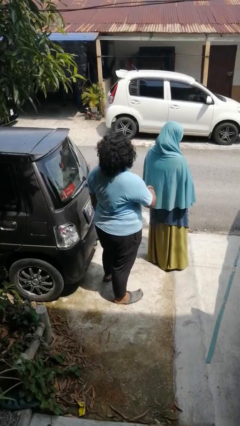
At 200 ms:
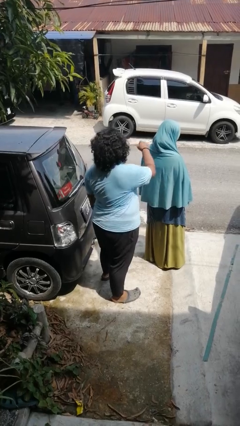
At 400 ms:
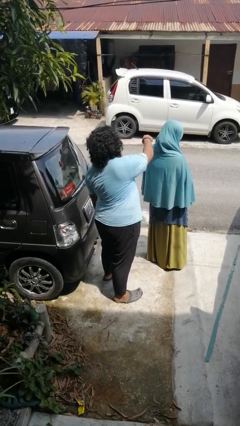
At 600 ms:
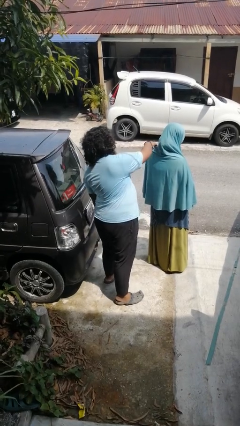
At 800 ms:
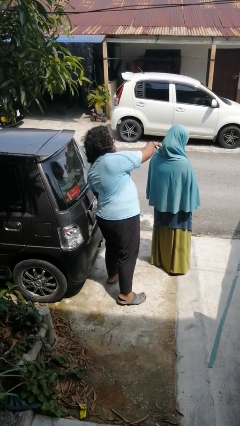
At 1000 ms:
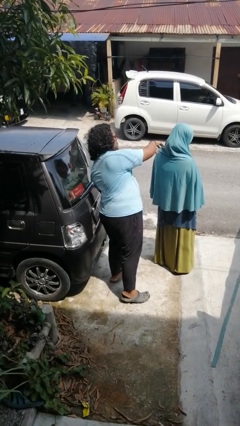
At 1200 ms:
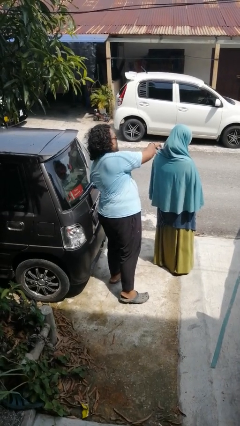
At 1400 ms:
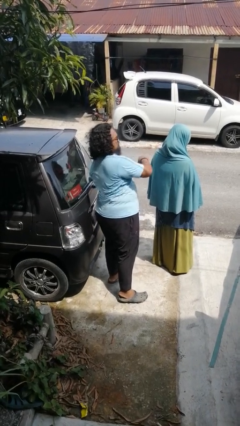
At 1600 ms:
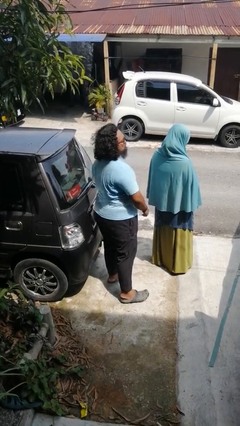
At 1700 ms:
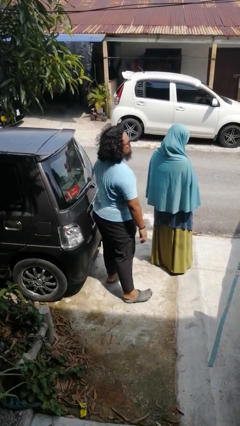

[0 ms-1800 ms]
person touches back of person

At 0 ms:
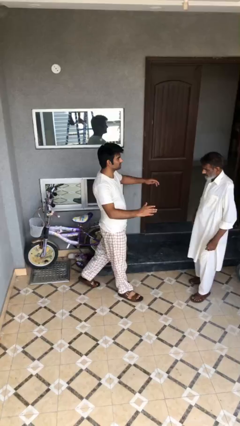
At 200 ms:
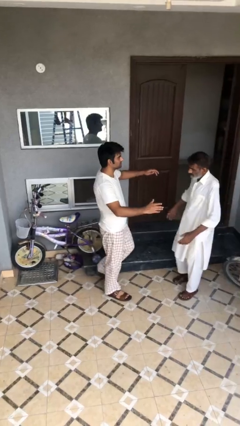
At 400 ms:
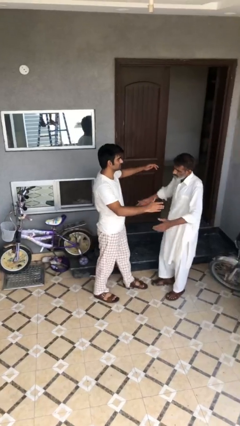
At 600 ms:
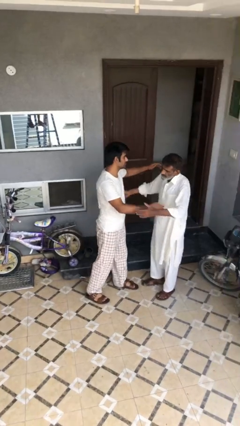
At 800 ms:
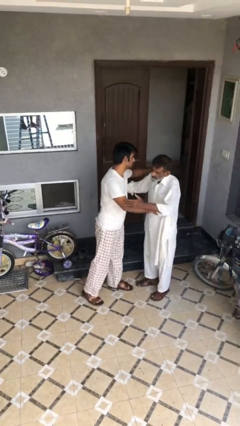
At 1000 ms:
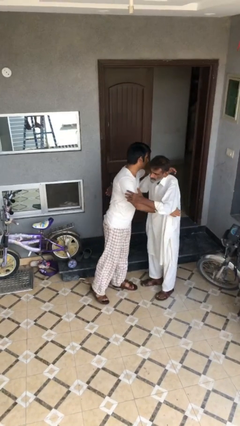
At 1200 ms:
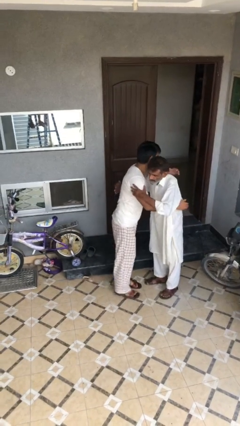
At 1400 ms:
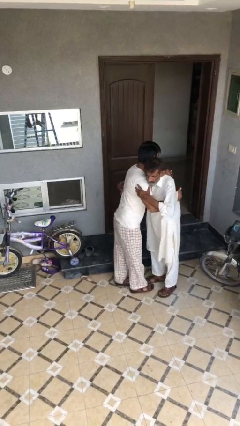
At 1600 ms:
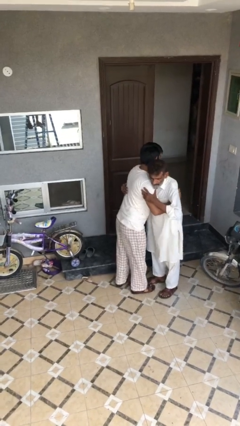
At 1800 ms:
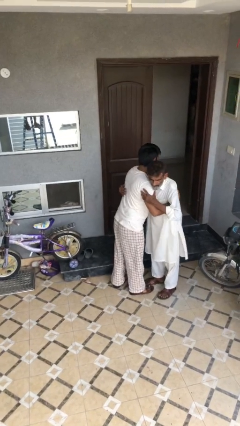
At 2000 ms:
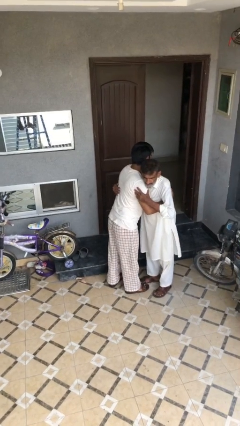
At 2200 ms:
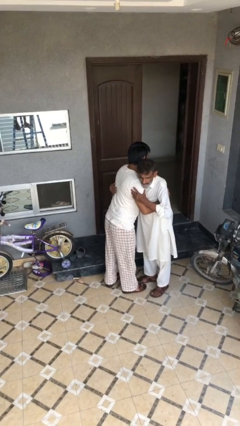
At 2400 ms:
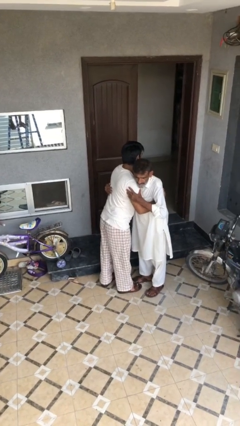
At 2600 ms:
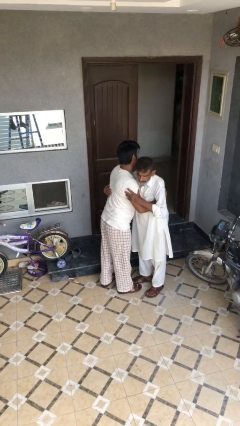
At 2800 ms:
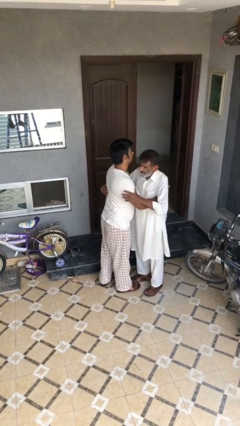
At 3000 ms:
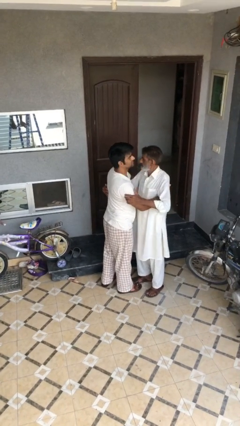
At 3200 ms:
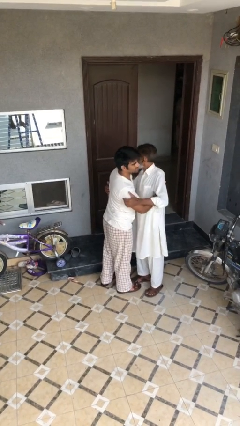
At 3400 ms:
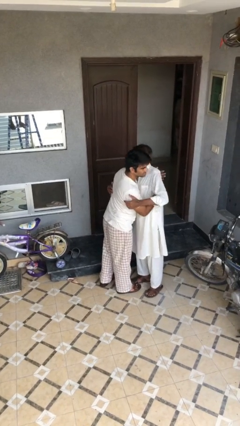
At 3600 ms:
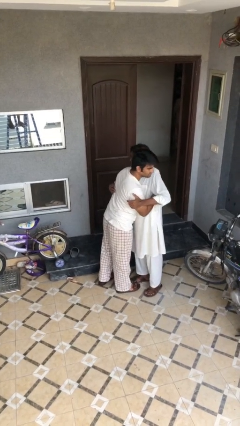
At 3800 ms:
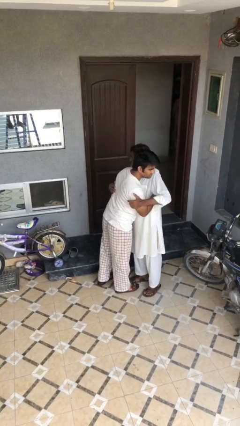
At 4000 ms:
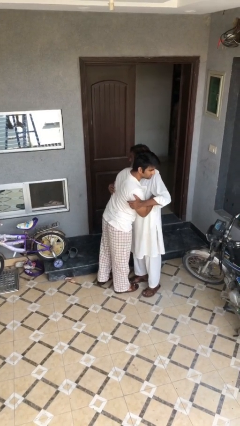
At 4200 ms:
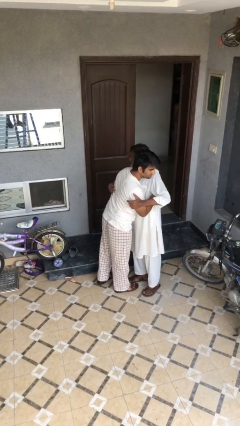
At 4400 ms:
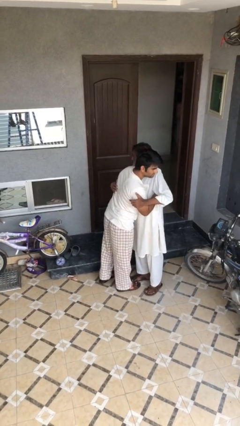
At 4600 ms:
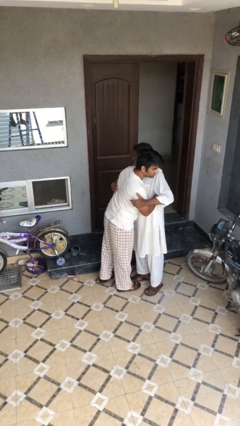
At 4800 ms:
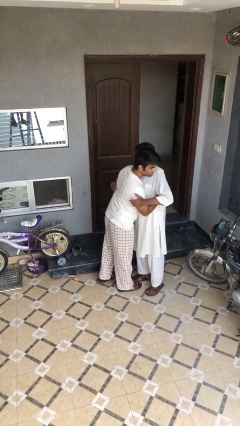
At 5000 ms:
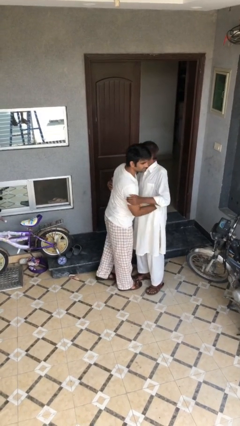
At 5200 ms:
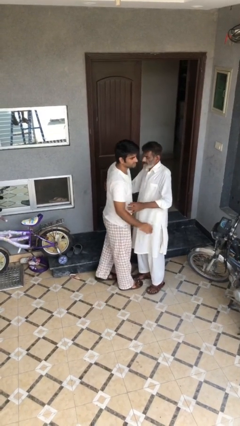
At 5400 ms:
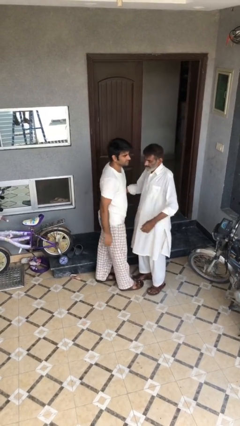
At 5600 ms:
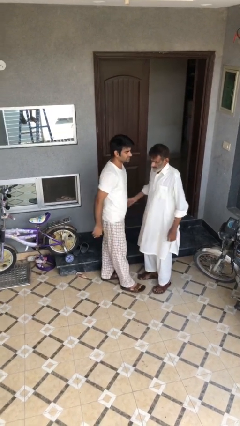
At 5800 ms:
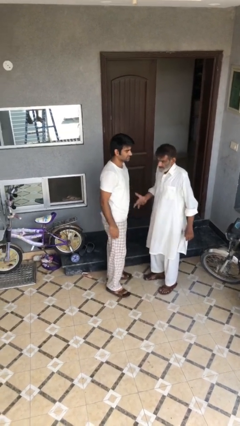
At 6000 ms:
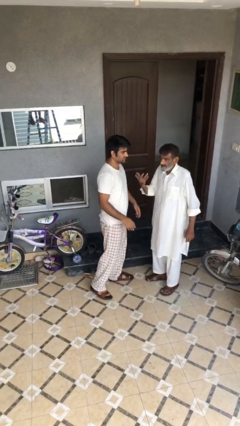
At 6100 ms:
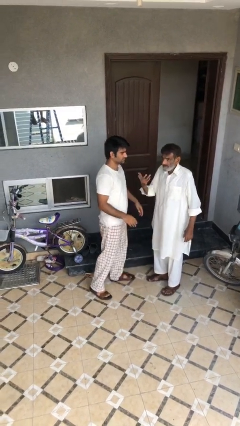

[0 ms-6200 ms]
person embraces person

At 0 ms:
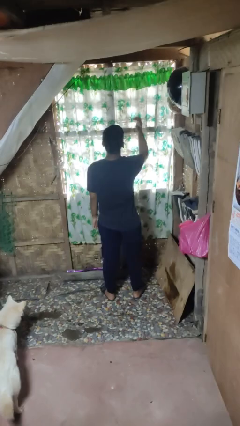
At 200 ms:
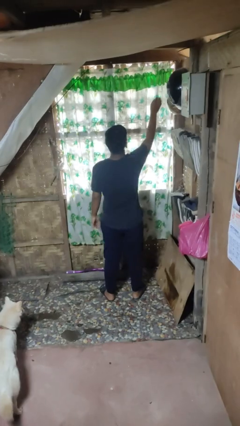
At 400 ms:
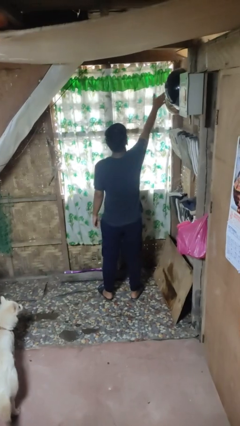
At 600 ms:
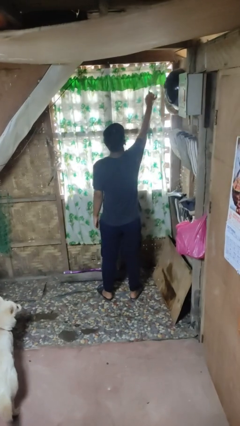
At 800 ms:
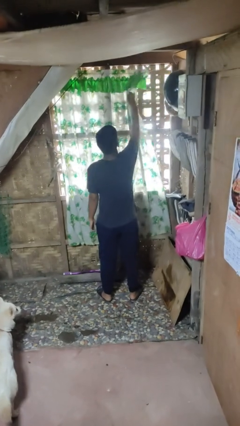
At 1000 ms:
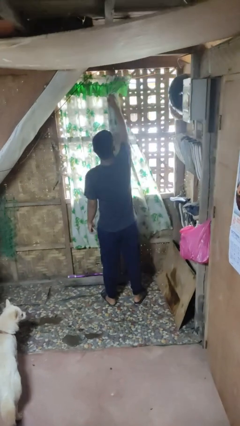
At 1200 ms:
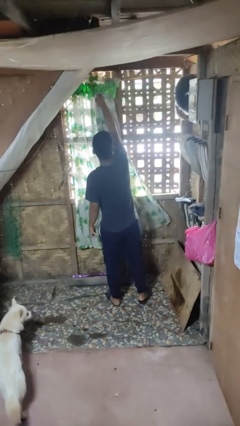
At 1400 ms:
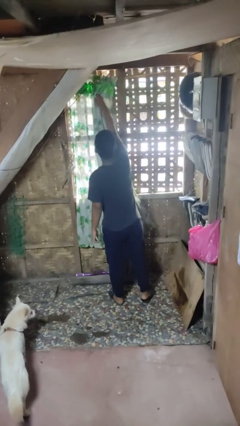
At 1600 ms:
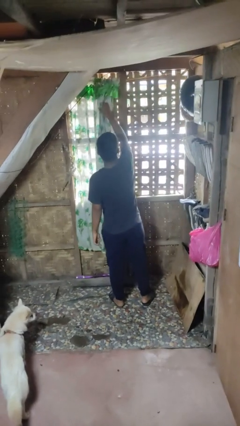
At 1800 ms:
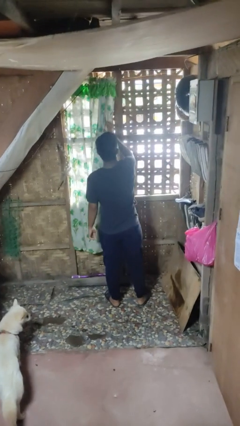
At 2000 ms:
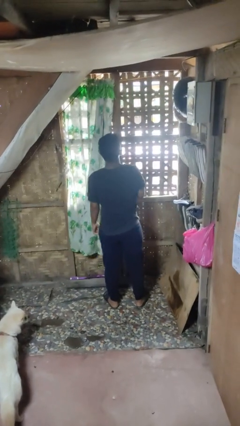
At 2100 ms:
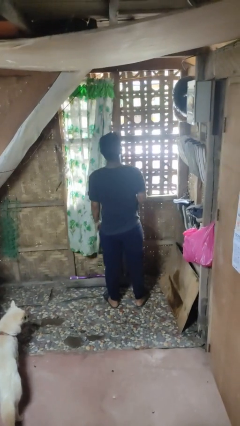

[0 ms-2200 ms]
person opens curtains

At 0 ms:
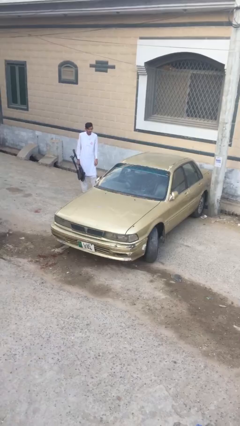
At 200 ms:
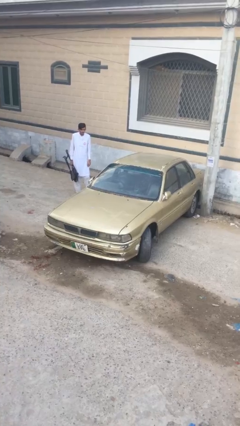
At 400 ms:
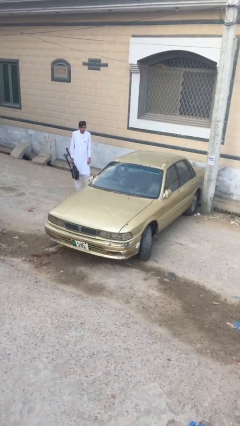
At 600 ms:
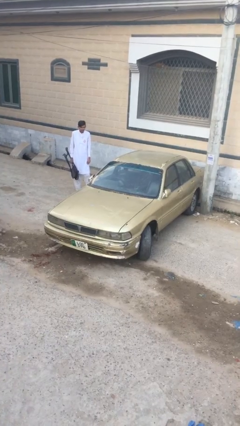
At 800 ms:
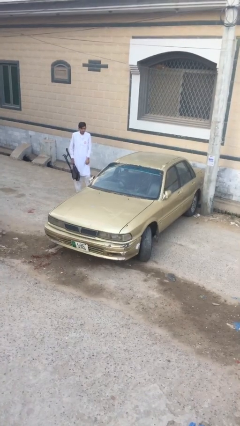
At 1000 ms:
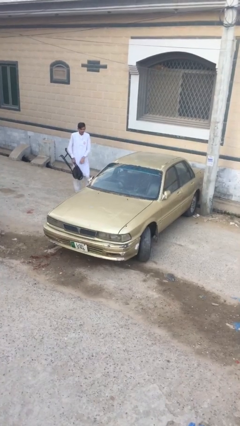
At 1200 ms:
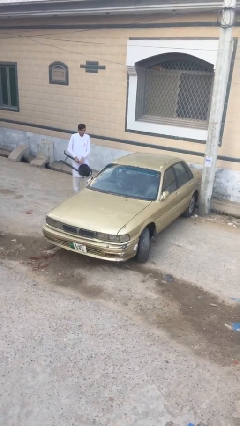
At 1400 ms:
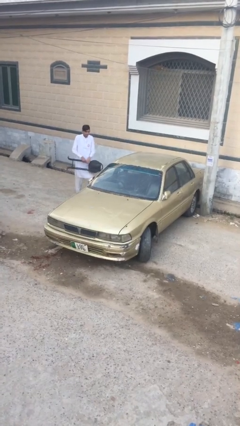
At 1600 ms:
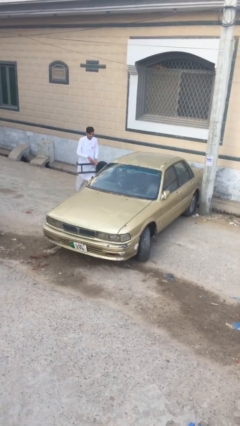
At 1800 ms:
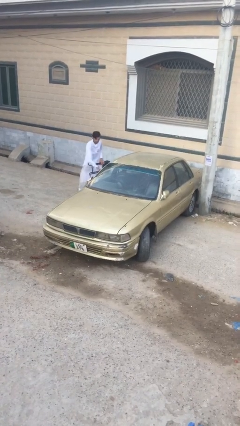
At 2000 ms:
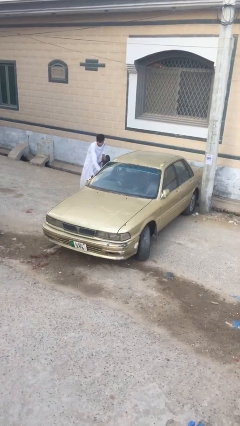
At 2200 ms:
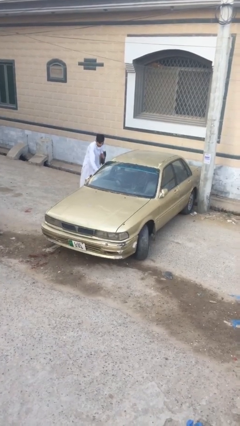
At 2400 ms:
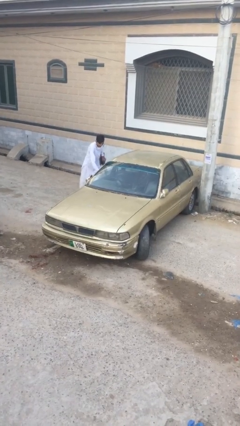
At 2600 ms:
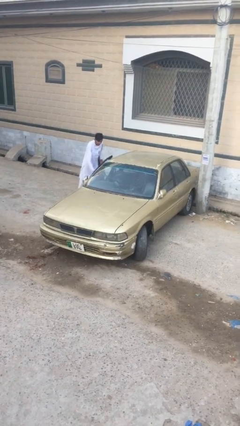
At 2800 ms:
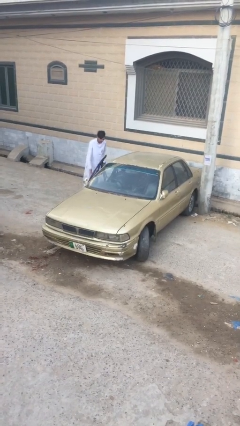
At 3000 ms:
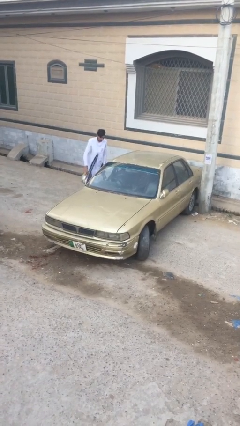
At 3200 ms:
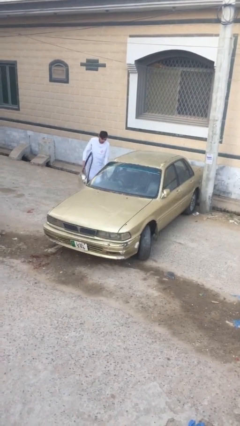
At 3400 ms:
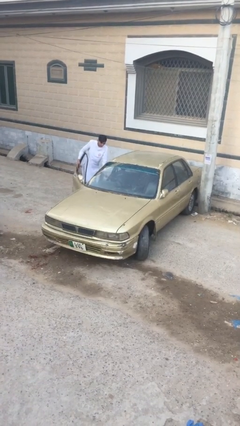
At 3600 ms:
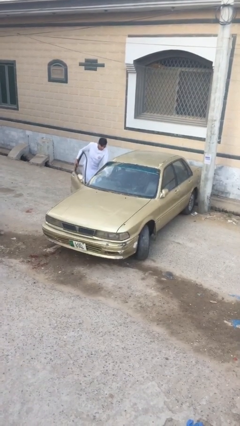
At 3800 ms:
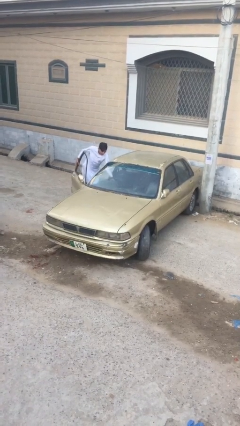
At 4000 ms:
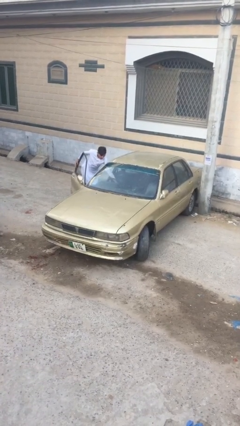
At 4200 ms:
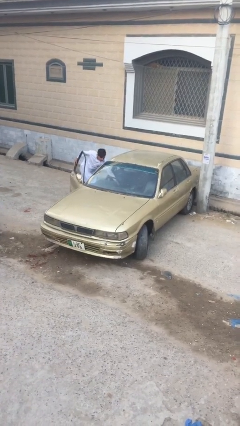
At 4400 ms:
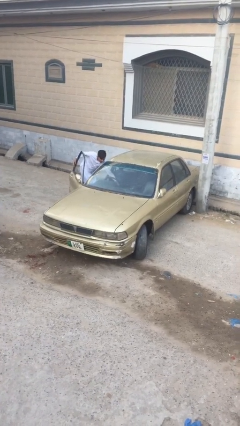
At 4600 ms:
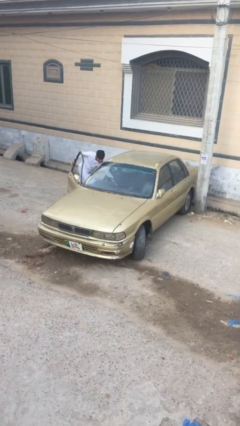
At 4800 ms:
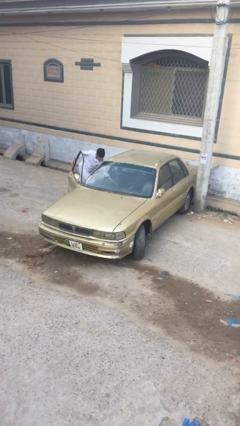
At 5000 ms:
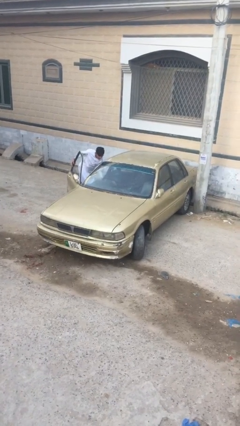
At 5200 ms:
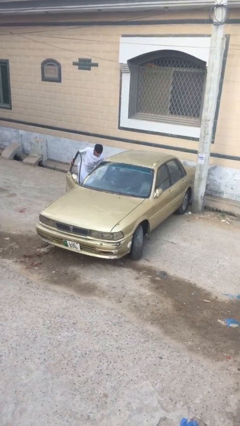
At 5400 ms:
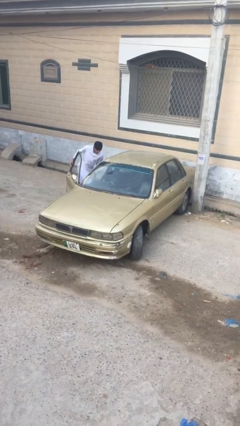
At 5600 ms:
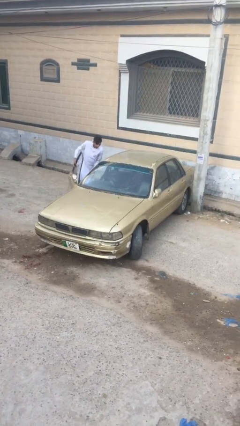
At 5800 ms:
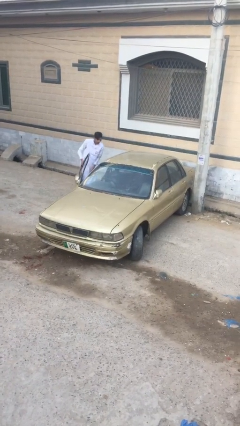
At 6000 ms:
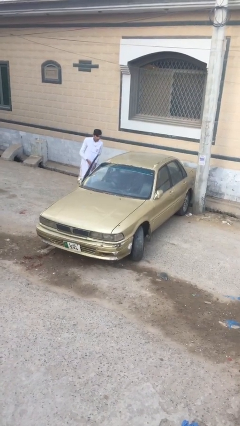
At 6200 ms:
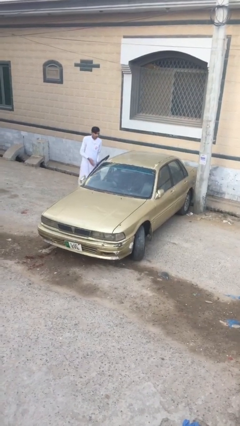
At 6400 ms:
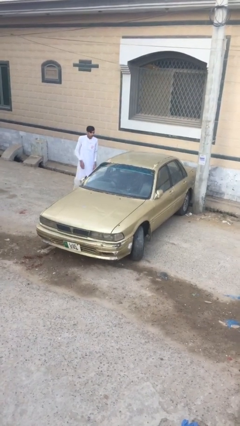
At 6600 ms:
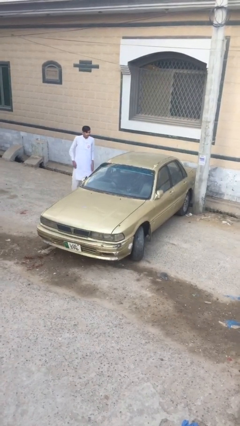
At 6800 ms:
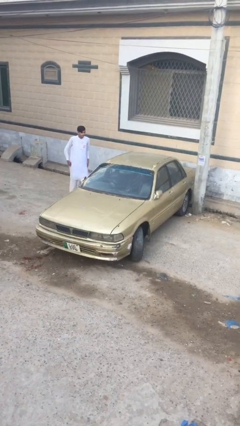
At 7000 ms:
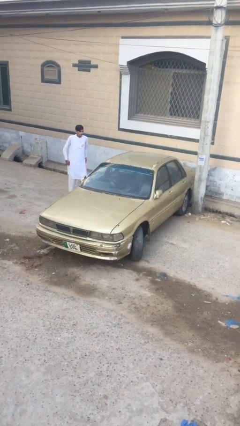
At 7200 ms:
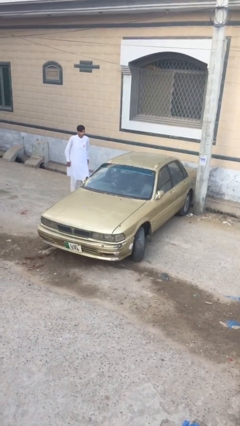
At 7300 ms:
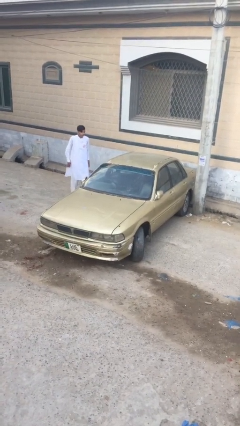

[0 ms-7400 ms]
person loads car
